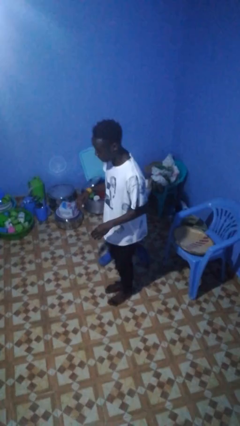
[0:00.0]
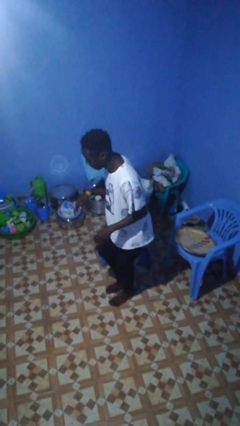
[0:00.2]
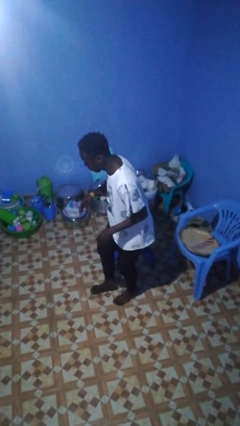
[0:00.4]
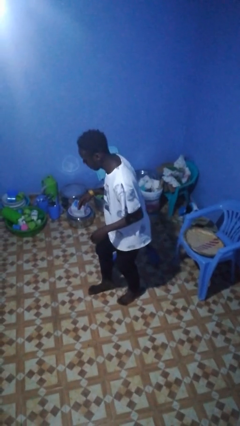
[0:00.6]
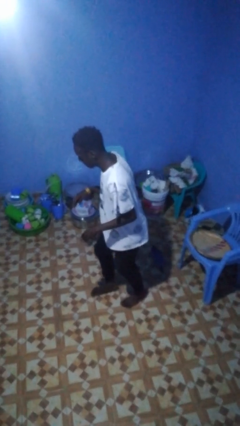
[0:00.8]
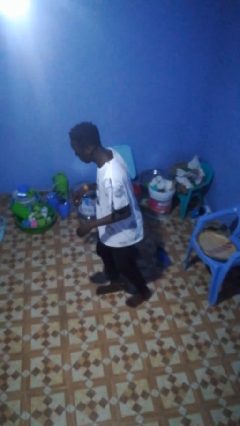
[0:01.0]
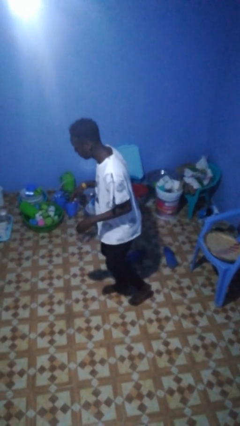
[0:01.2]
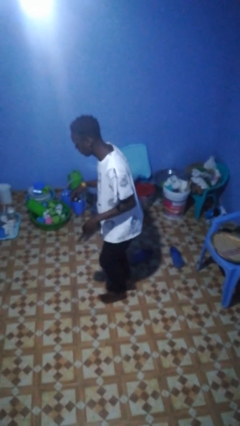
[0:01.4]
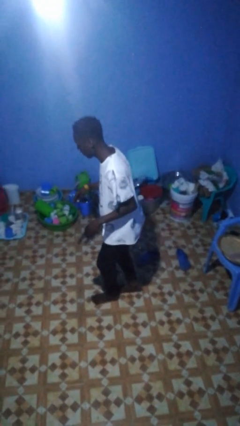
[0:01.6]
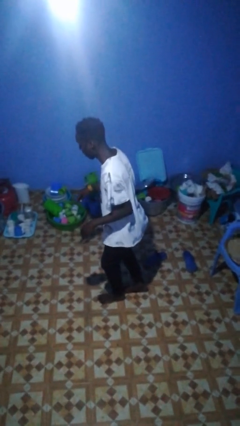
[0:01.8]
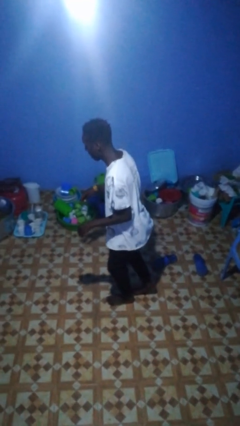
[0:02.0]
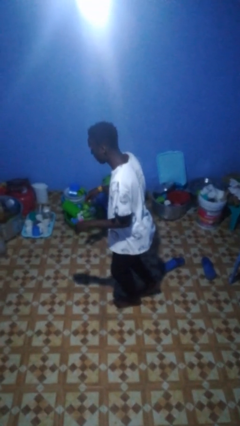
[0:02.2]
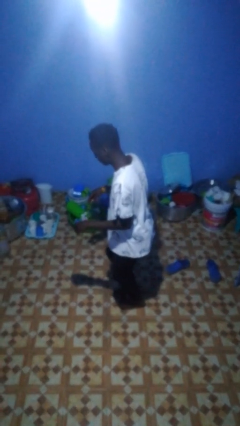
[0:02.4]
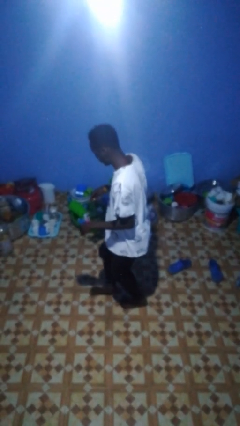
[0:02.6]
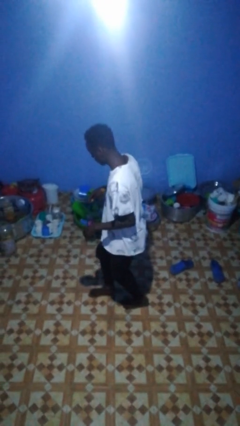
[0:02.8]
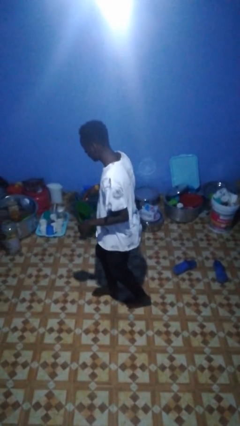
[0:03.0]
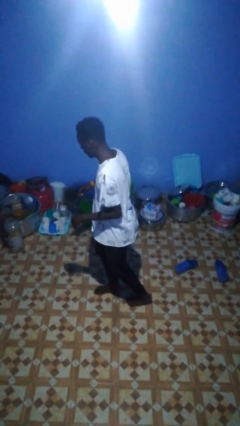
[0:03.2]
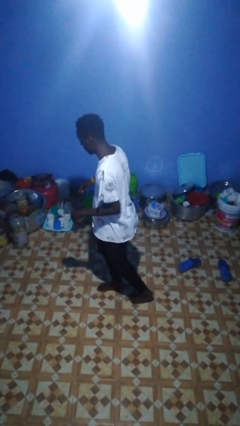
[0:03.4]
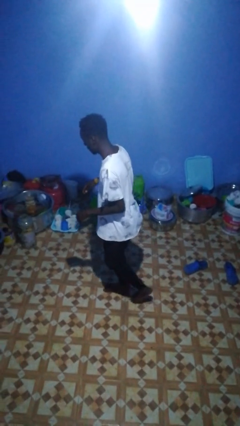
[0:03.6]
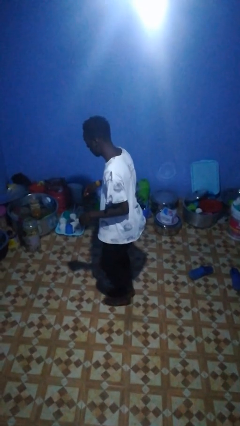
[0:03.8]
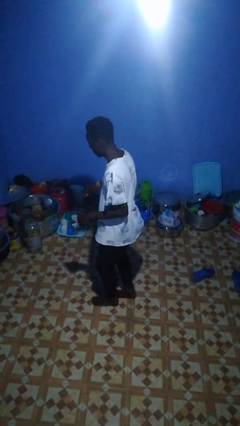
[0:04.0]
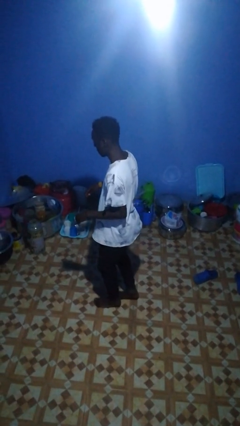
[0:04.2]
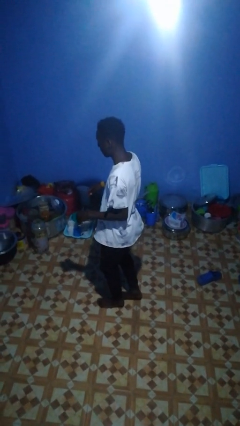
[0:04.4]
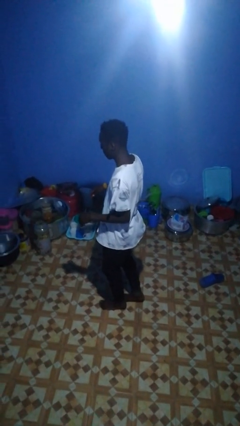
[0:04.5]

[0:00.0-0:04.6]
person walks tiptoe

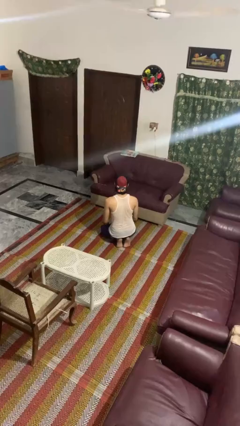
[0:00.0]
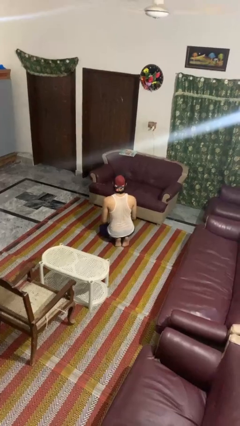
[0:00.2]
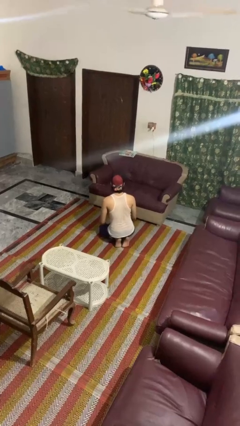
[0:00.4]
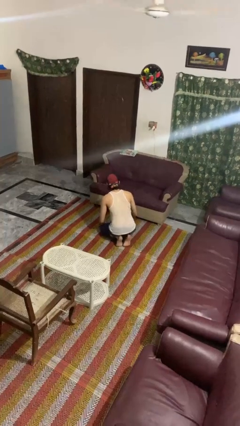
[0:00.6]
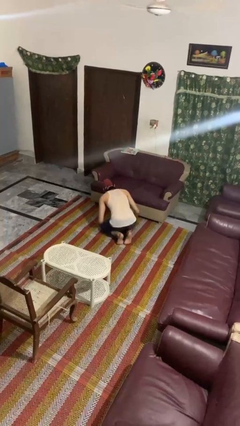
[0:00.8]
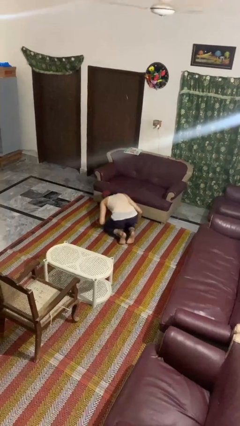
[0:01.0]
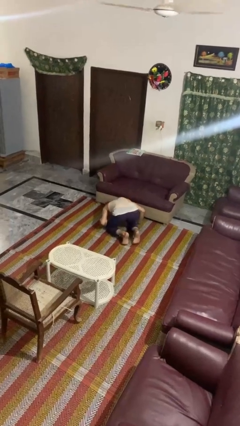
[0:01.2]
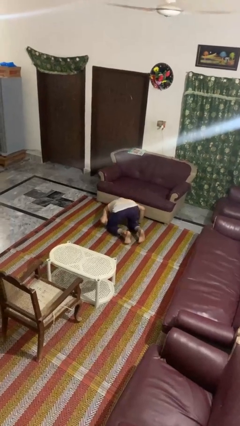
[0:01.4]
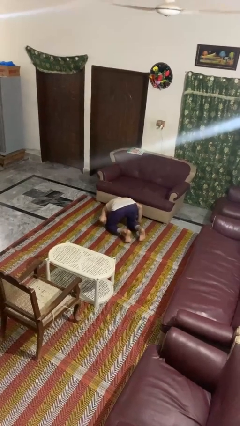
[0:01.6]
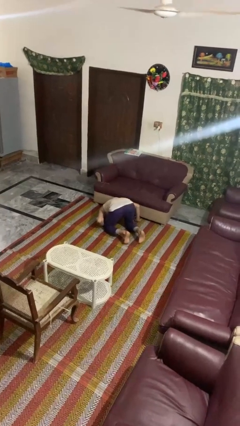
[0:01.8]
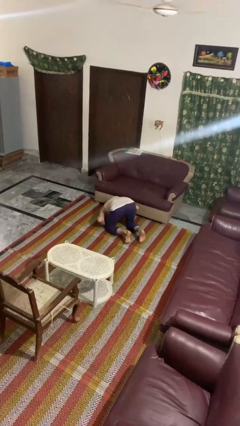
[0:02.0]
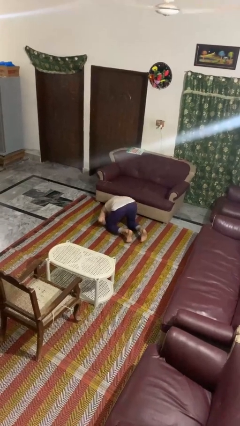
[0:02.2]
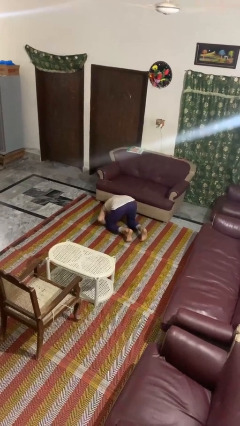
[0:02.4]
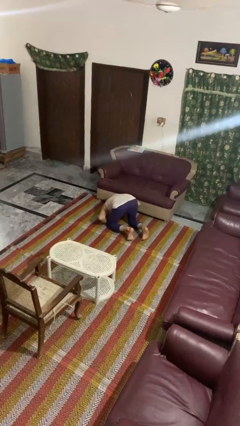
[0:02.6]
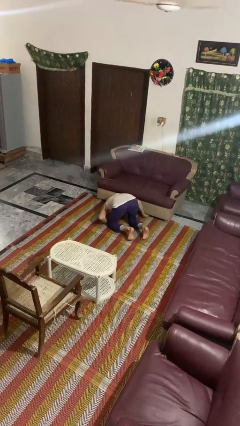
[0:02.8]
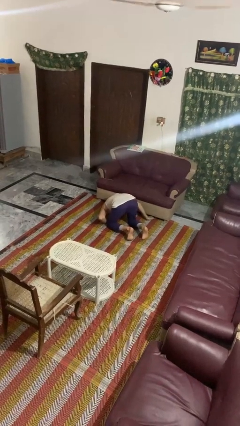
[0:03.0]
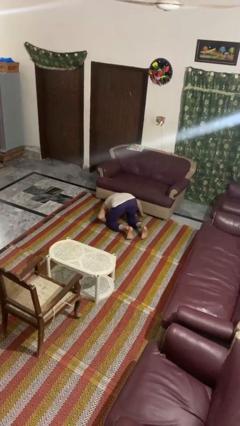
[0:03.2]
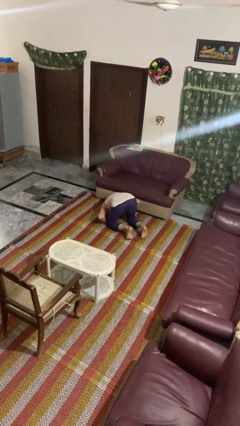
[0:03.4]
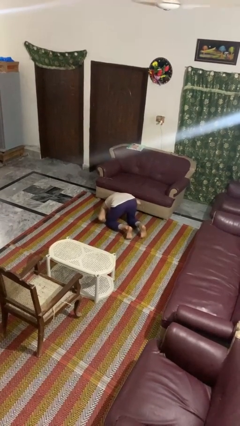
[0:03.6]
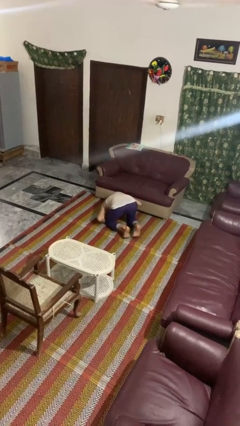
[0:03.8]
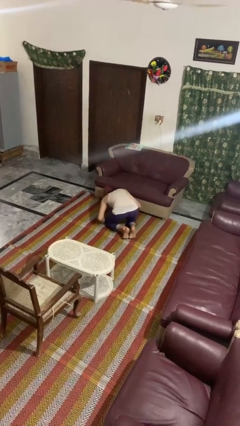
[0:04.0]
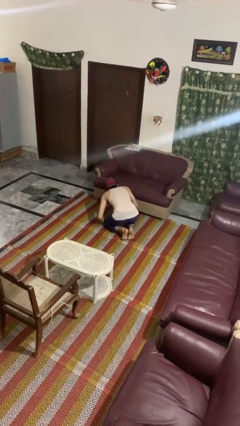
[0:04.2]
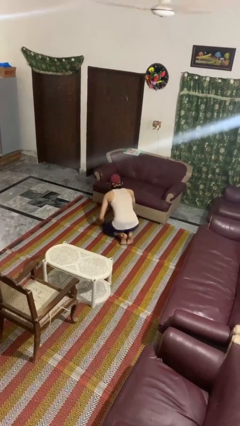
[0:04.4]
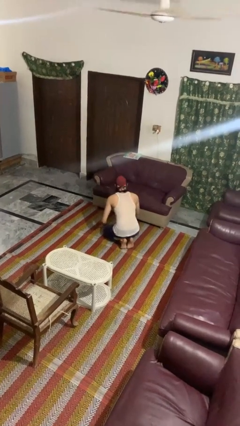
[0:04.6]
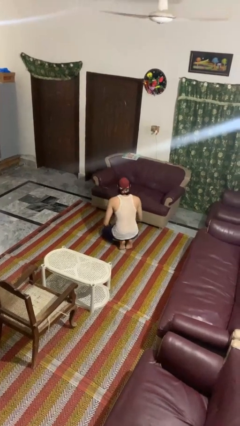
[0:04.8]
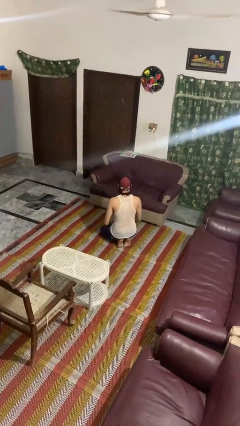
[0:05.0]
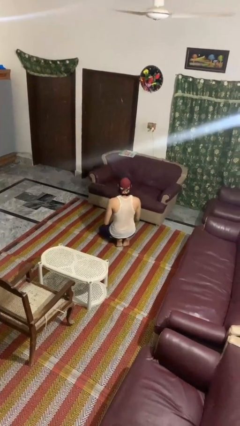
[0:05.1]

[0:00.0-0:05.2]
person searches under couch

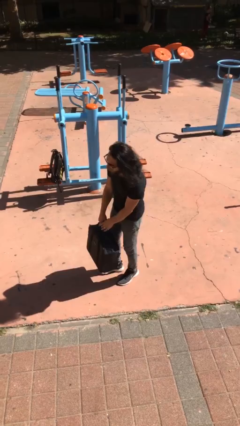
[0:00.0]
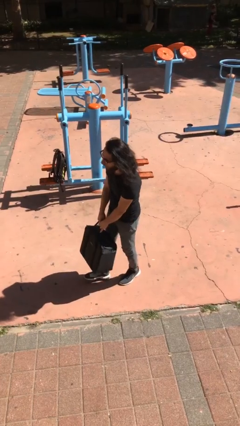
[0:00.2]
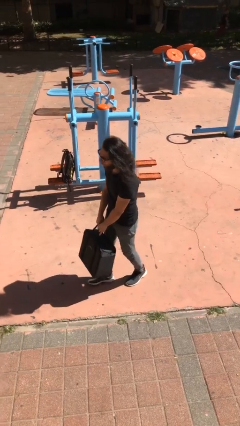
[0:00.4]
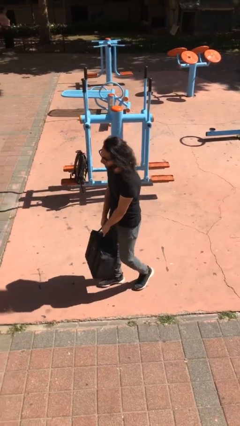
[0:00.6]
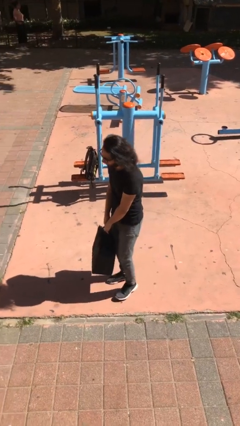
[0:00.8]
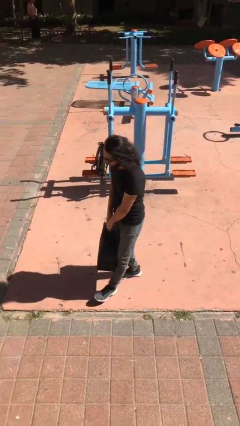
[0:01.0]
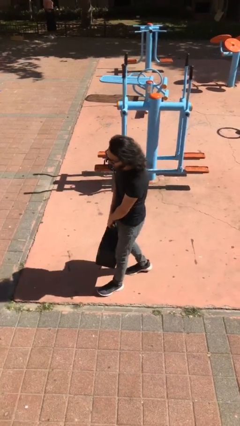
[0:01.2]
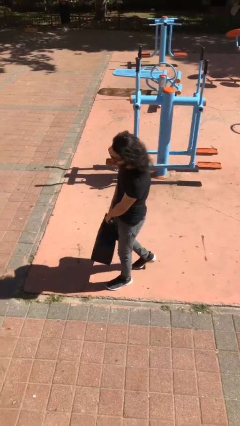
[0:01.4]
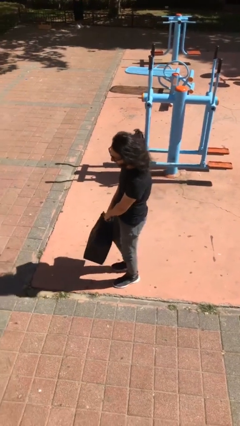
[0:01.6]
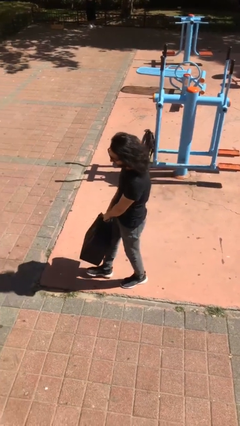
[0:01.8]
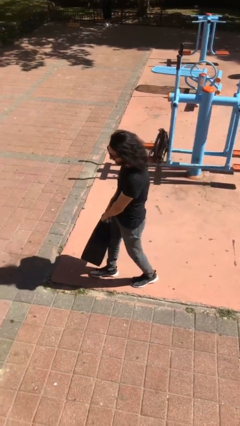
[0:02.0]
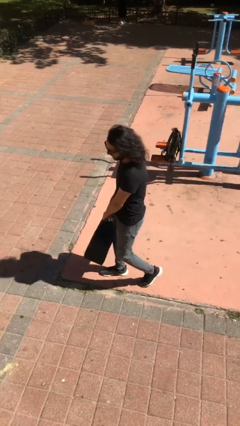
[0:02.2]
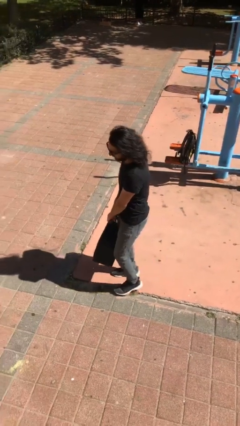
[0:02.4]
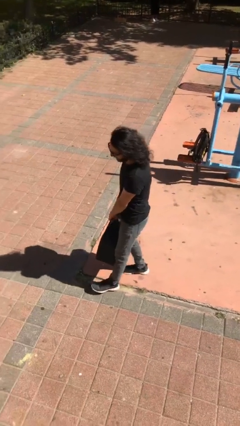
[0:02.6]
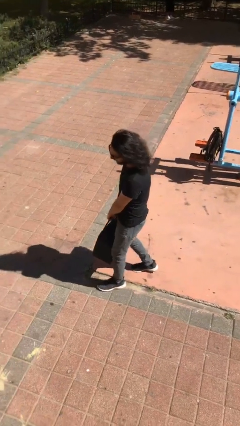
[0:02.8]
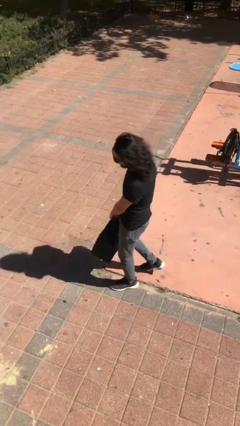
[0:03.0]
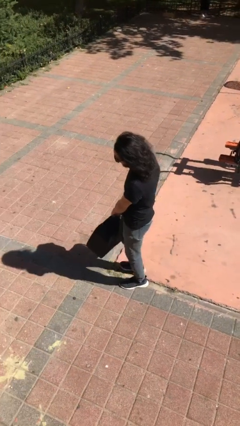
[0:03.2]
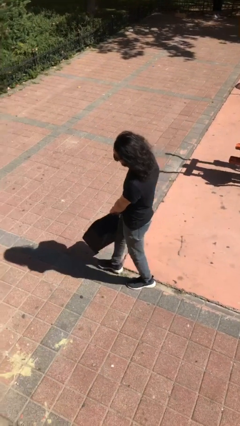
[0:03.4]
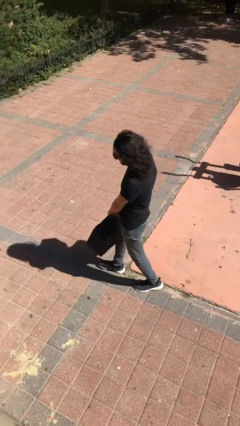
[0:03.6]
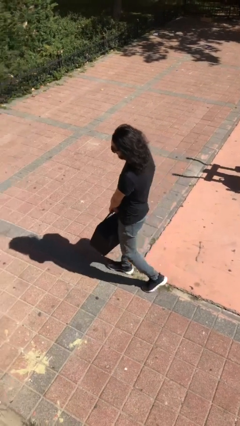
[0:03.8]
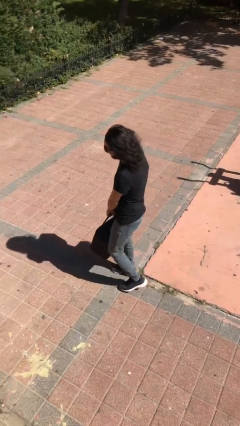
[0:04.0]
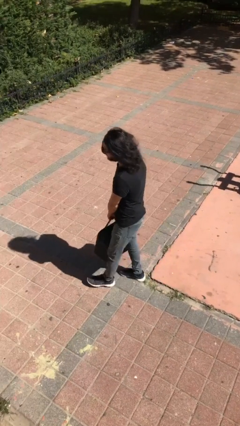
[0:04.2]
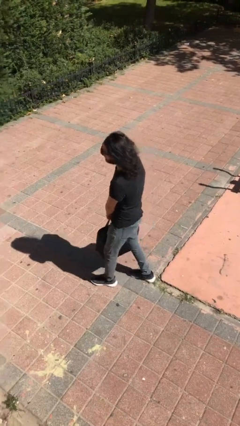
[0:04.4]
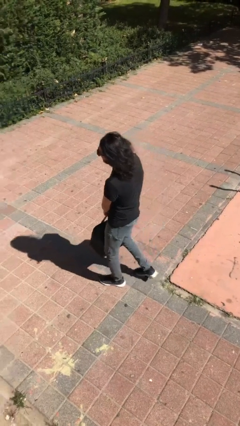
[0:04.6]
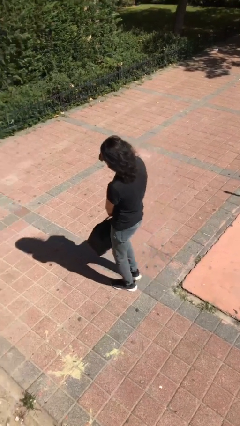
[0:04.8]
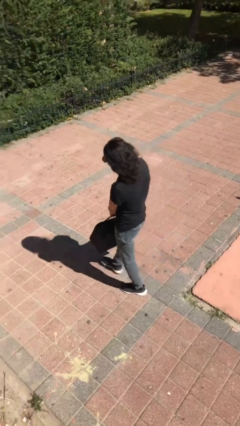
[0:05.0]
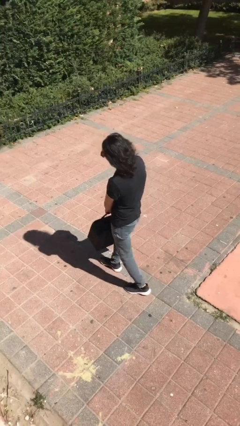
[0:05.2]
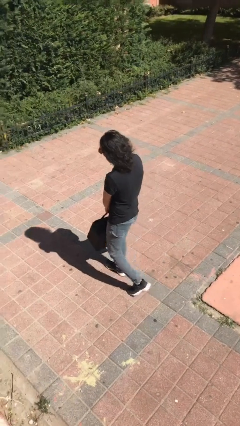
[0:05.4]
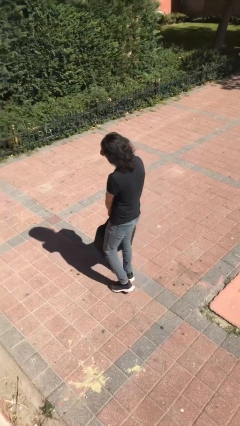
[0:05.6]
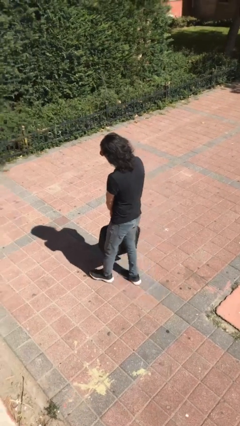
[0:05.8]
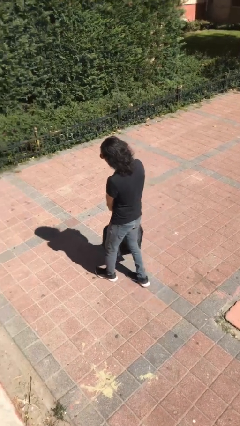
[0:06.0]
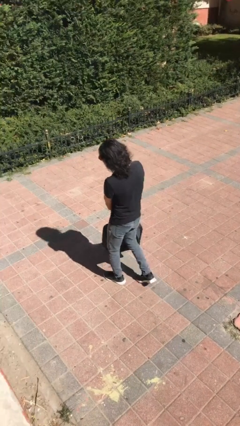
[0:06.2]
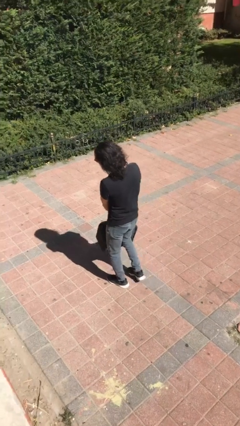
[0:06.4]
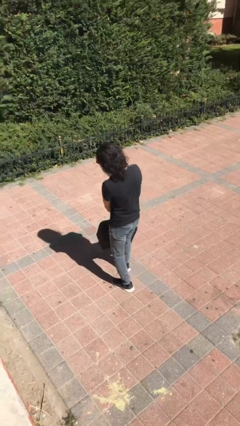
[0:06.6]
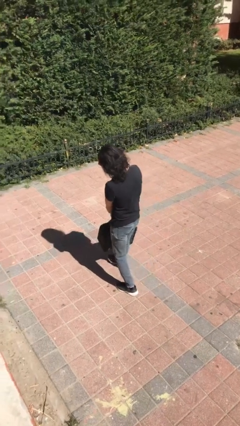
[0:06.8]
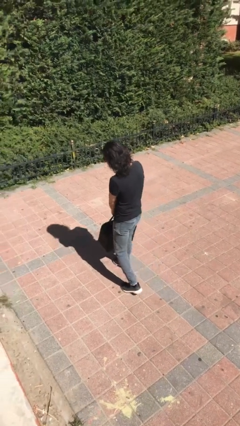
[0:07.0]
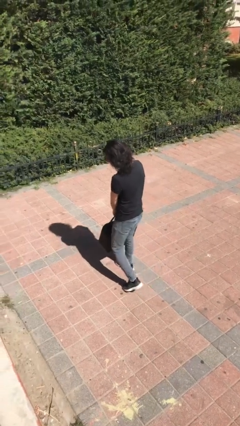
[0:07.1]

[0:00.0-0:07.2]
person carries heavy object

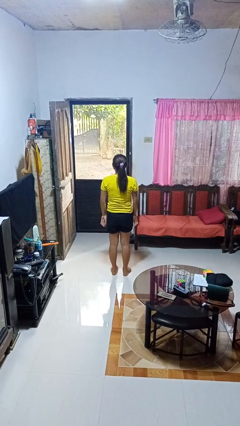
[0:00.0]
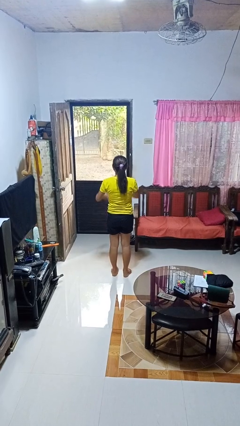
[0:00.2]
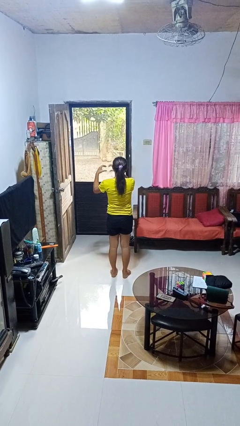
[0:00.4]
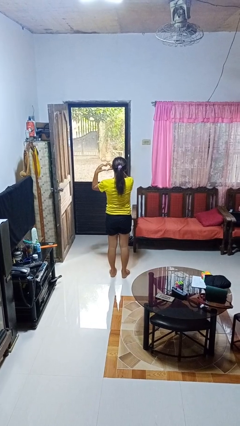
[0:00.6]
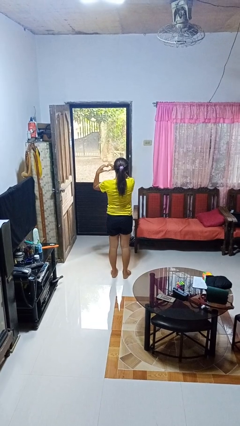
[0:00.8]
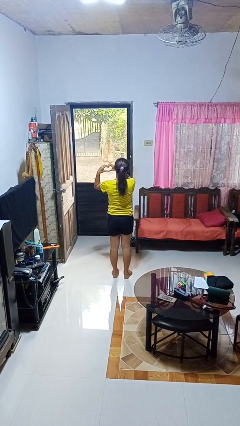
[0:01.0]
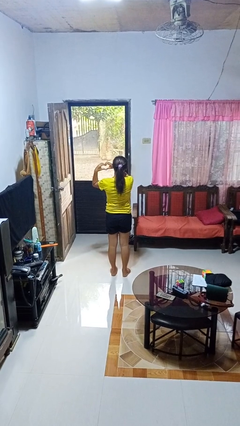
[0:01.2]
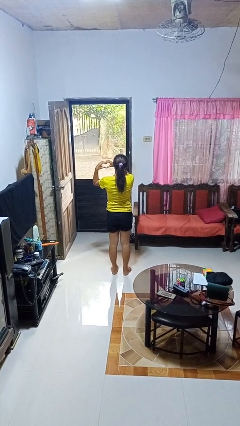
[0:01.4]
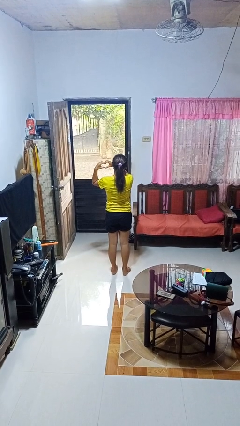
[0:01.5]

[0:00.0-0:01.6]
person gestures heart
